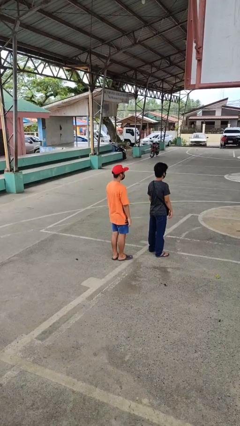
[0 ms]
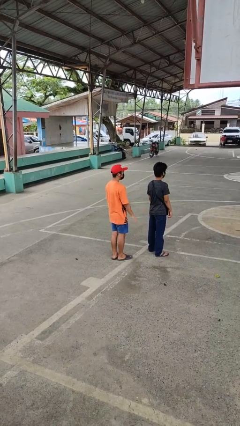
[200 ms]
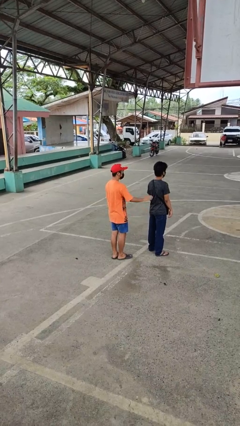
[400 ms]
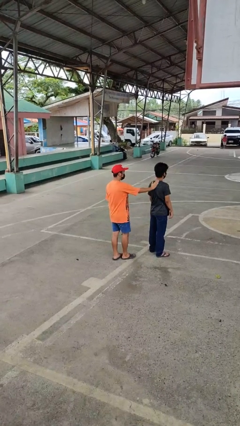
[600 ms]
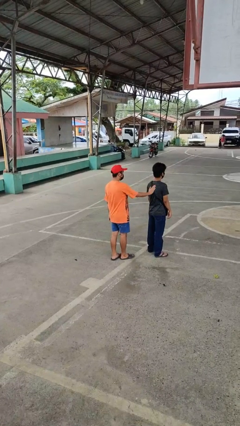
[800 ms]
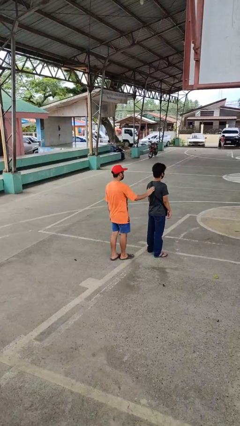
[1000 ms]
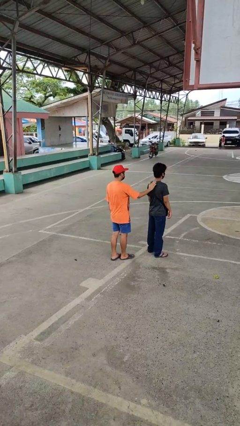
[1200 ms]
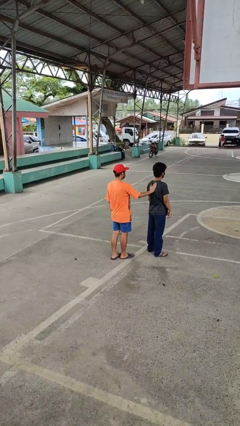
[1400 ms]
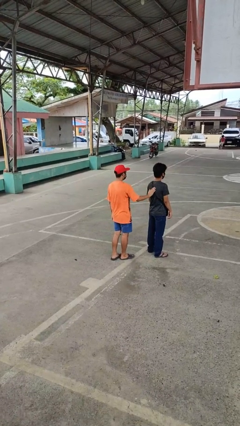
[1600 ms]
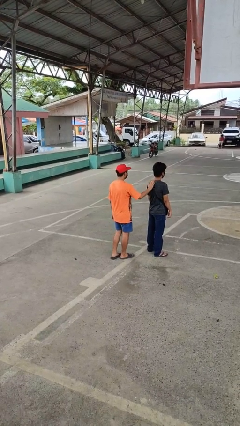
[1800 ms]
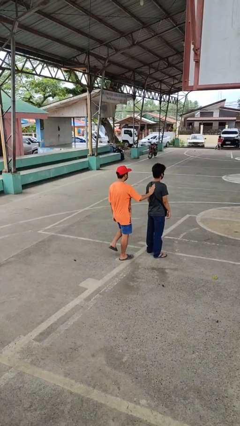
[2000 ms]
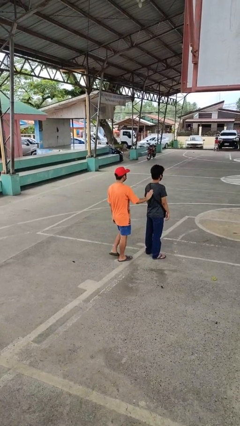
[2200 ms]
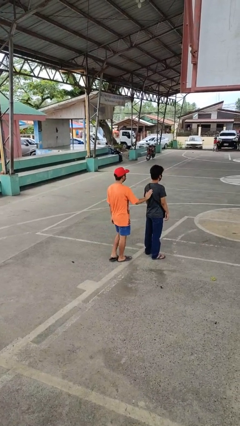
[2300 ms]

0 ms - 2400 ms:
person touches back of person

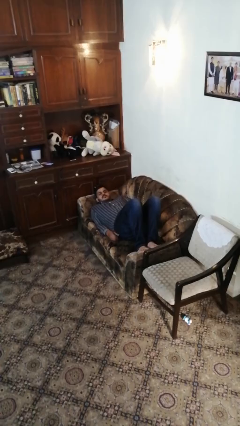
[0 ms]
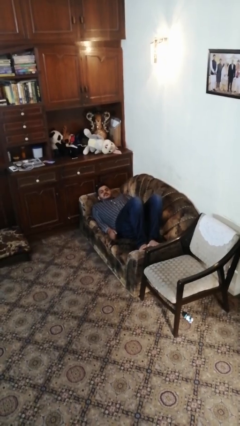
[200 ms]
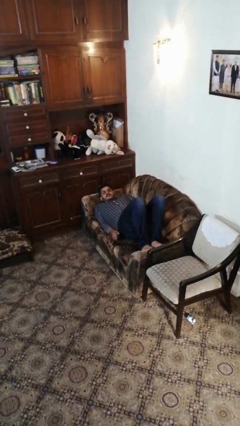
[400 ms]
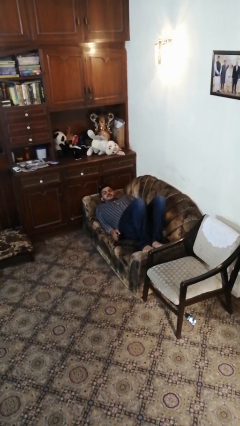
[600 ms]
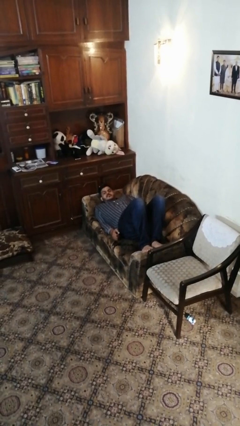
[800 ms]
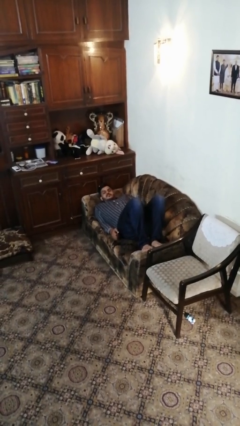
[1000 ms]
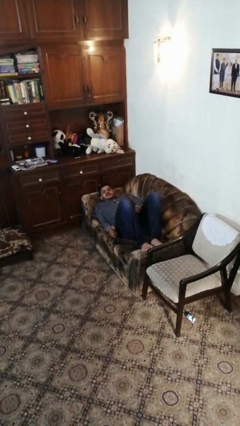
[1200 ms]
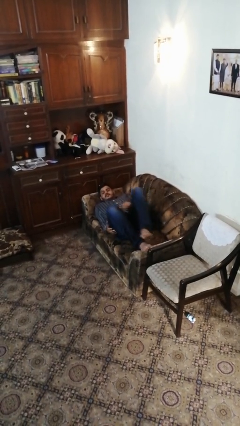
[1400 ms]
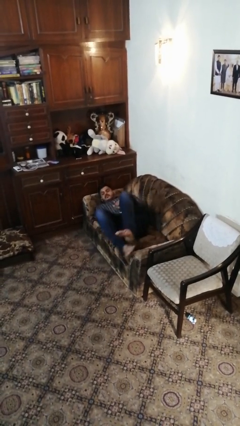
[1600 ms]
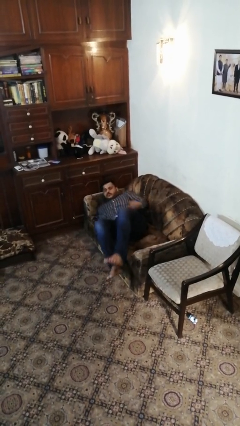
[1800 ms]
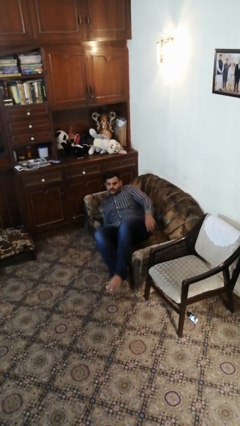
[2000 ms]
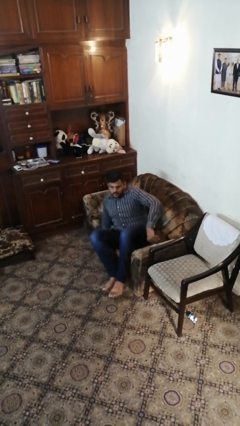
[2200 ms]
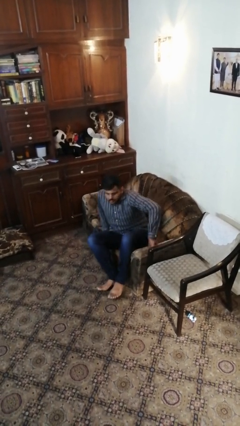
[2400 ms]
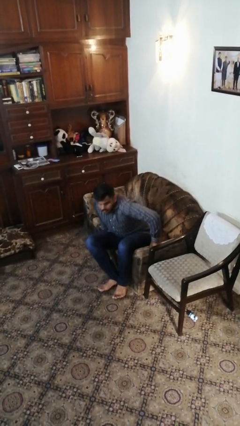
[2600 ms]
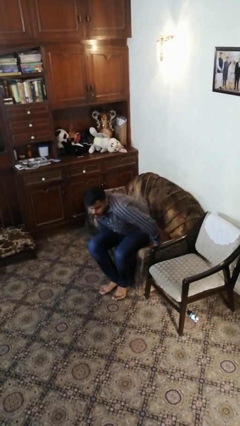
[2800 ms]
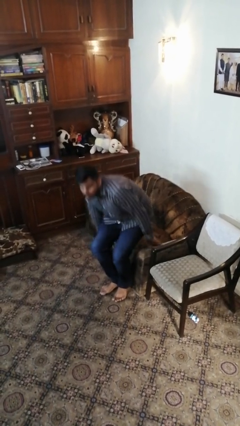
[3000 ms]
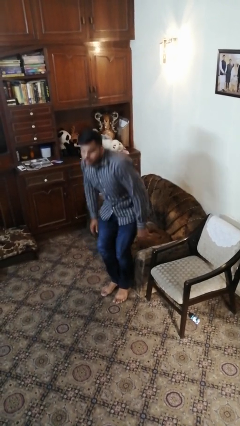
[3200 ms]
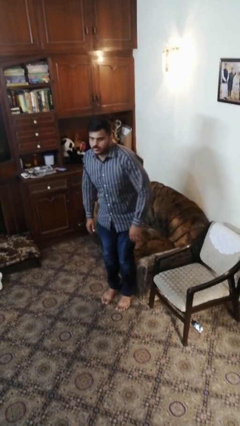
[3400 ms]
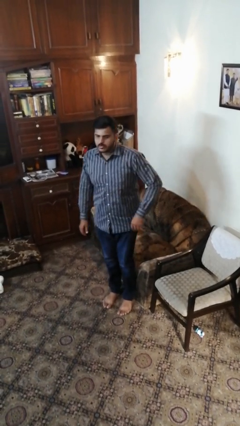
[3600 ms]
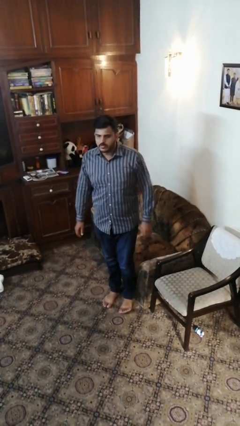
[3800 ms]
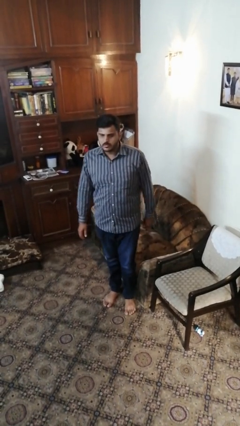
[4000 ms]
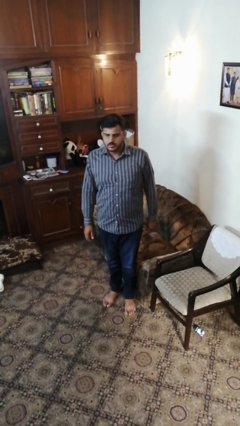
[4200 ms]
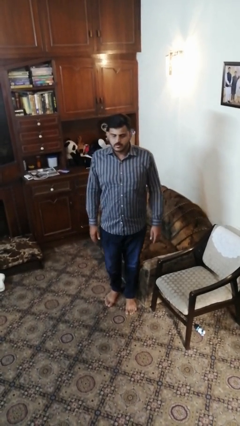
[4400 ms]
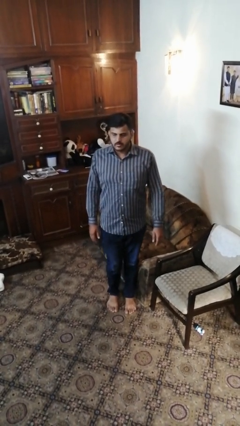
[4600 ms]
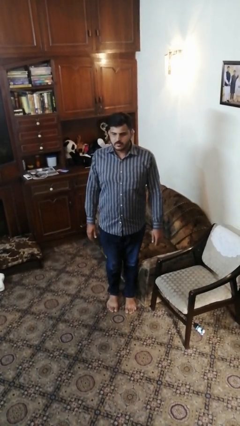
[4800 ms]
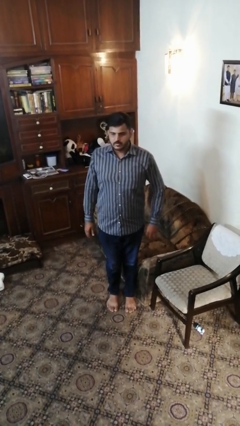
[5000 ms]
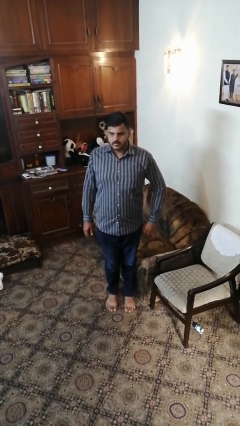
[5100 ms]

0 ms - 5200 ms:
person stands up

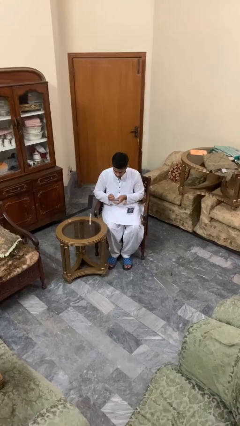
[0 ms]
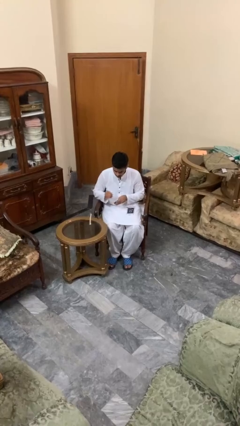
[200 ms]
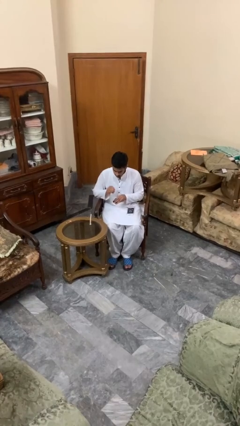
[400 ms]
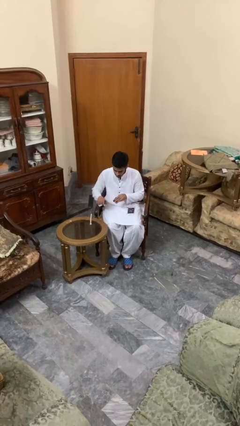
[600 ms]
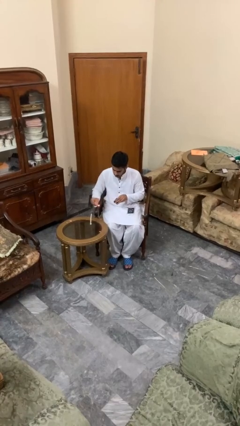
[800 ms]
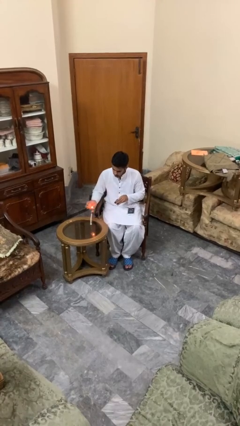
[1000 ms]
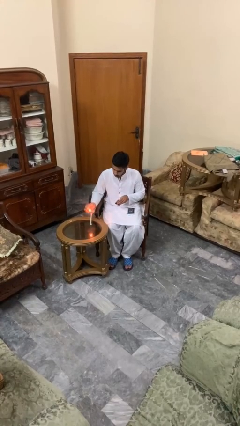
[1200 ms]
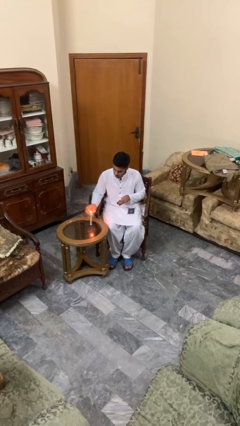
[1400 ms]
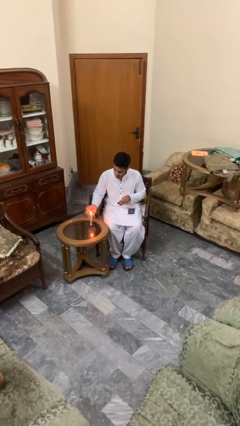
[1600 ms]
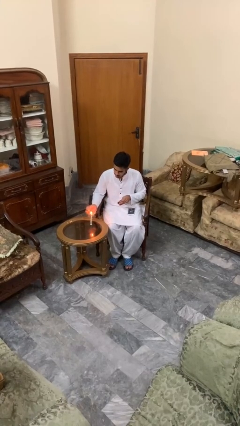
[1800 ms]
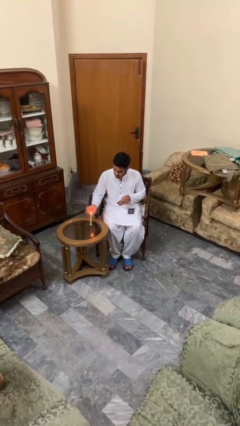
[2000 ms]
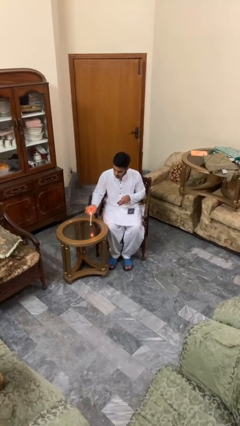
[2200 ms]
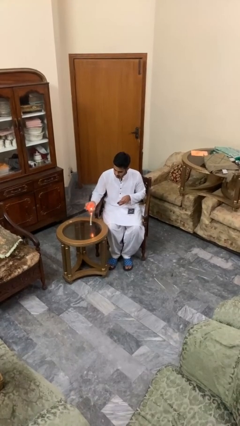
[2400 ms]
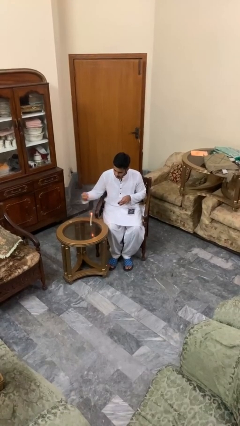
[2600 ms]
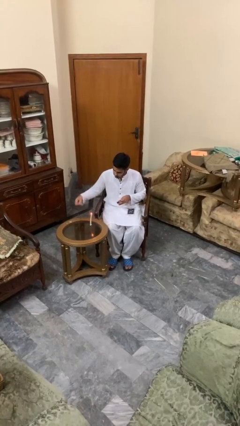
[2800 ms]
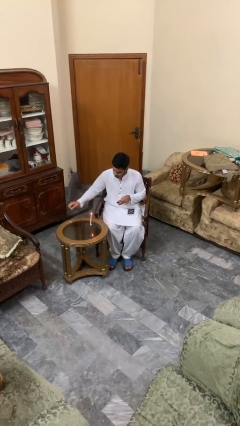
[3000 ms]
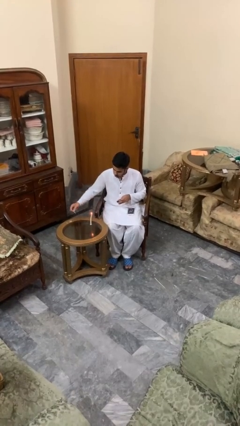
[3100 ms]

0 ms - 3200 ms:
person lights candle

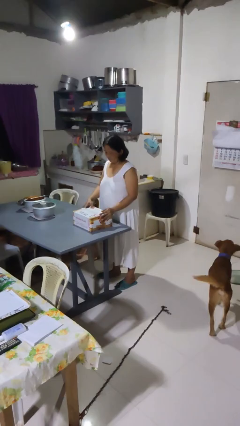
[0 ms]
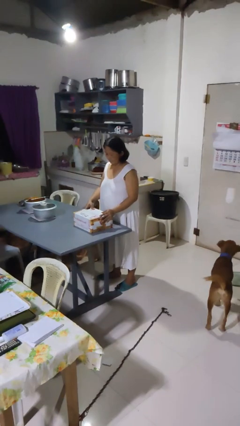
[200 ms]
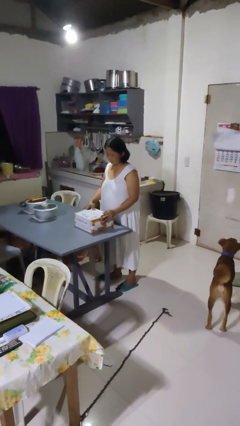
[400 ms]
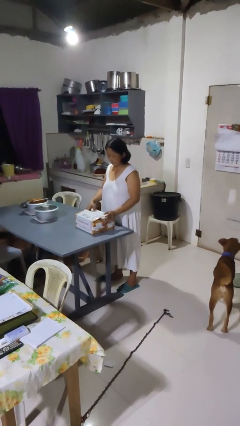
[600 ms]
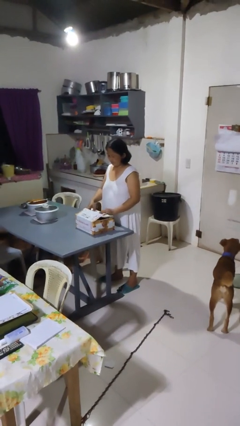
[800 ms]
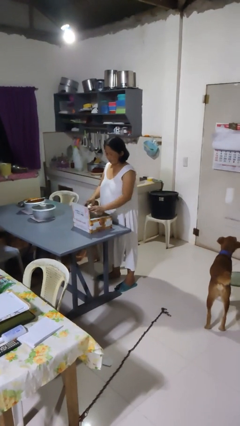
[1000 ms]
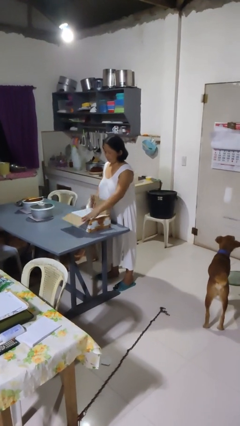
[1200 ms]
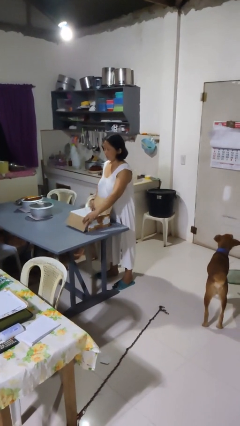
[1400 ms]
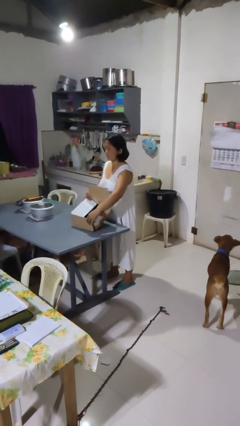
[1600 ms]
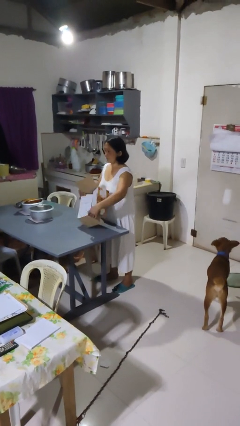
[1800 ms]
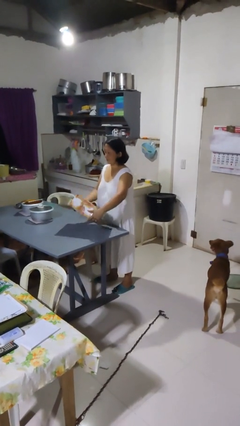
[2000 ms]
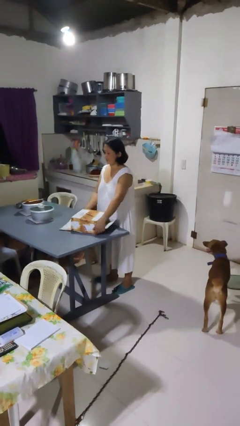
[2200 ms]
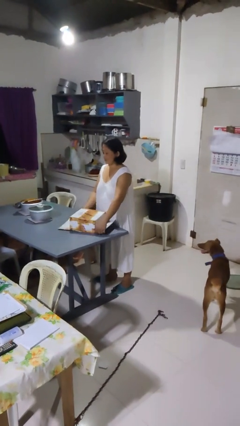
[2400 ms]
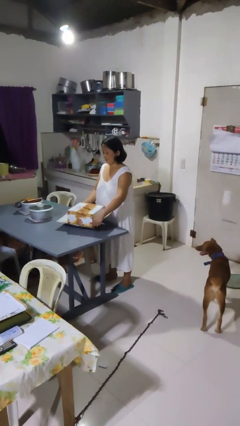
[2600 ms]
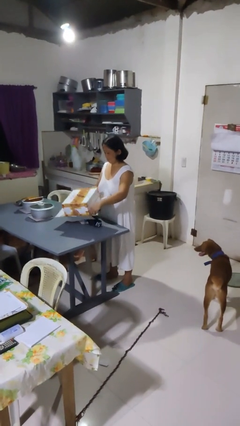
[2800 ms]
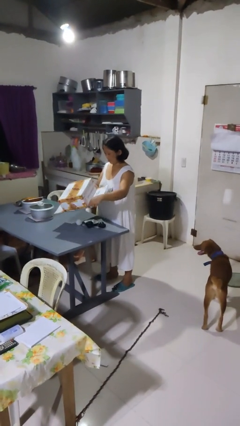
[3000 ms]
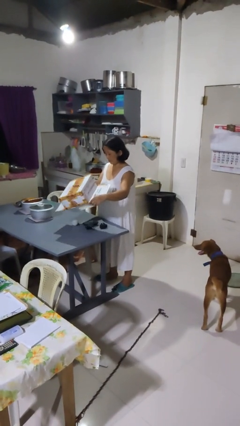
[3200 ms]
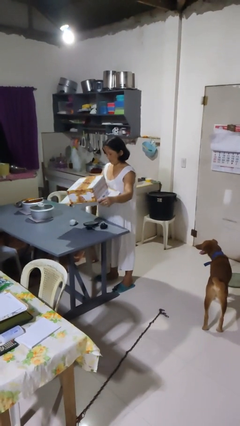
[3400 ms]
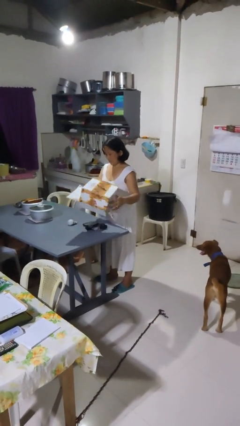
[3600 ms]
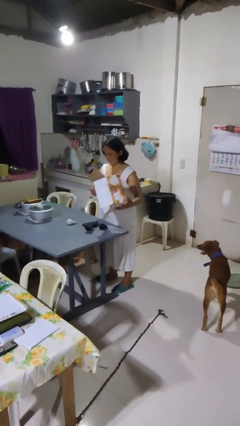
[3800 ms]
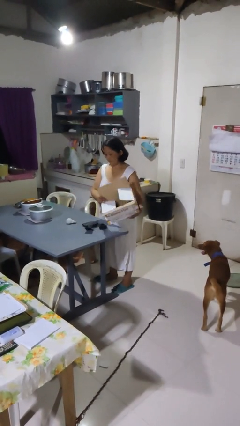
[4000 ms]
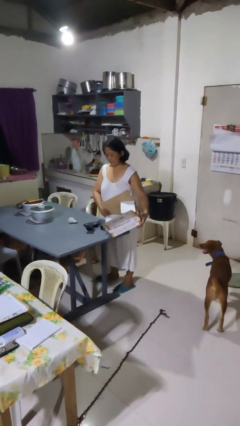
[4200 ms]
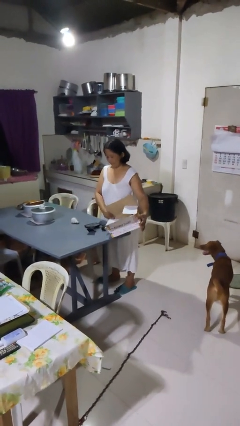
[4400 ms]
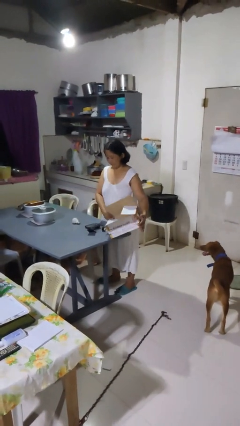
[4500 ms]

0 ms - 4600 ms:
person unloads box onto table

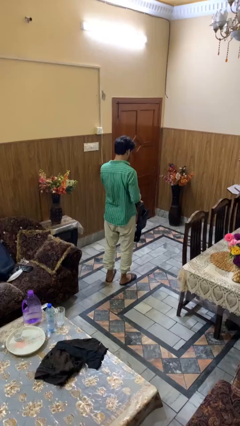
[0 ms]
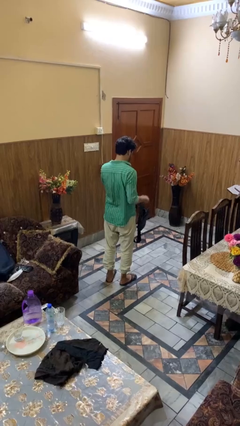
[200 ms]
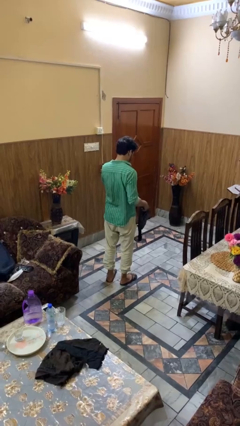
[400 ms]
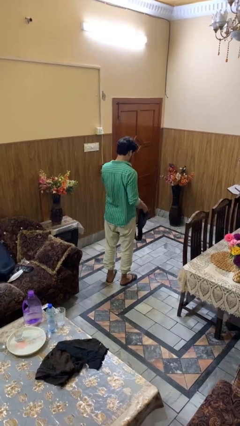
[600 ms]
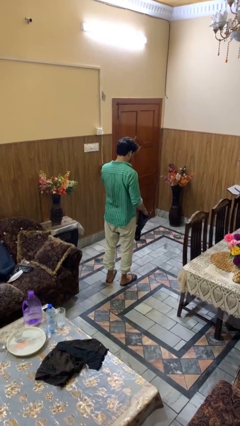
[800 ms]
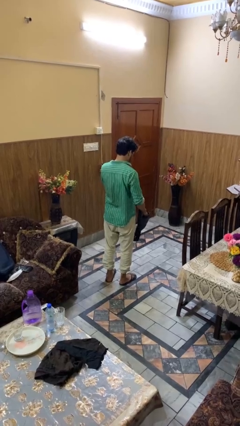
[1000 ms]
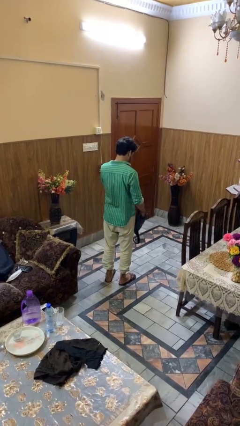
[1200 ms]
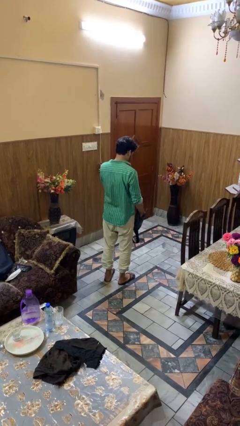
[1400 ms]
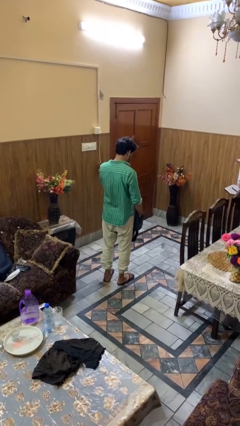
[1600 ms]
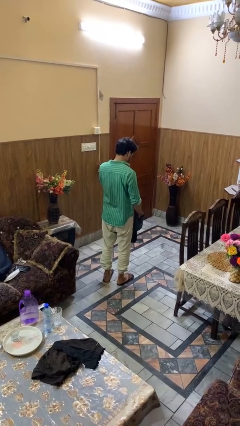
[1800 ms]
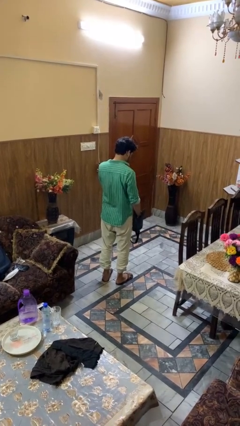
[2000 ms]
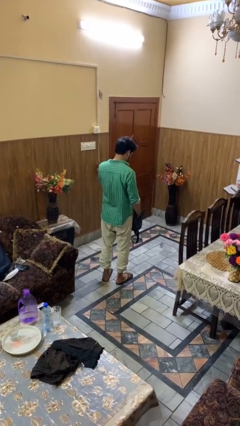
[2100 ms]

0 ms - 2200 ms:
person searches in purse
